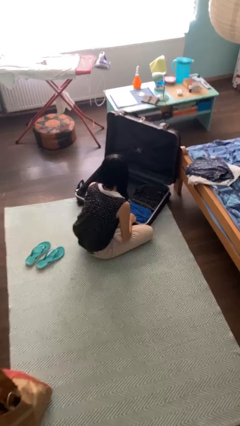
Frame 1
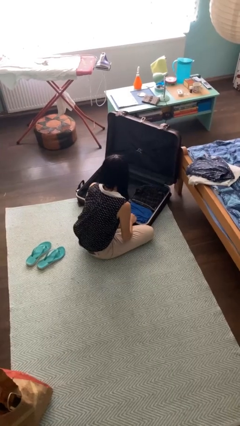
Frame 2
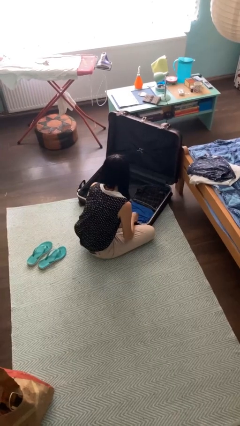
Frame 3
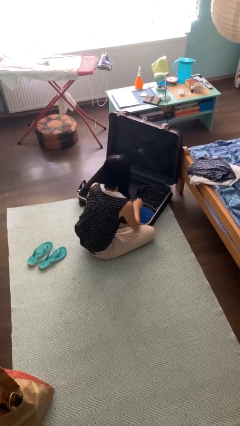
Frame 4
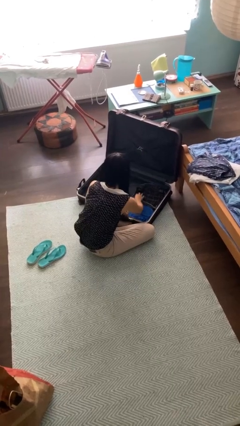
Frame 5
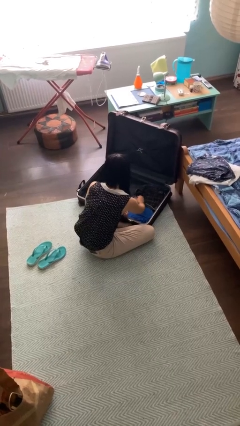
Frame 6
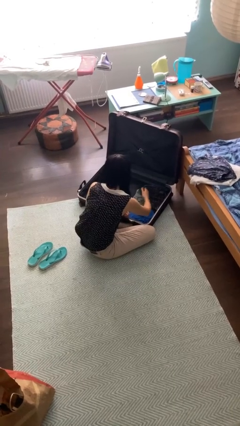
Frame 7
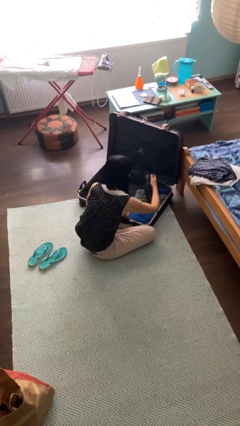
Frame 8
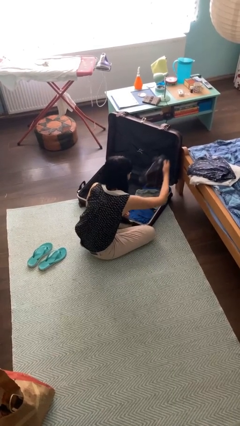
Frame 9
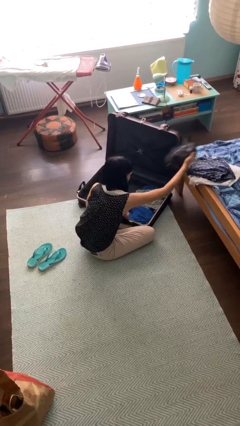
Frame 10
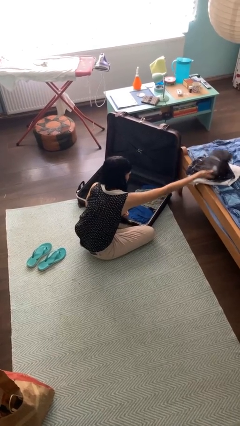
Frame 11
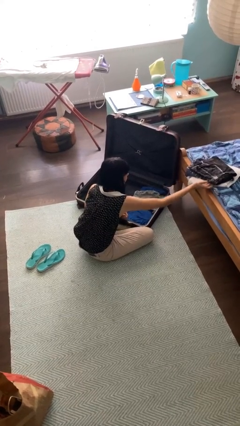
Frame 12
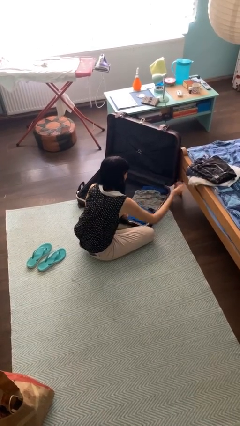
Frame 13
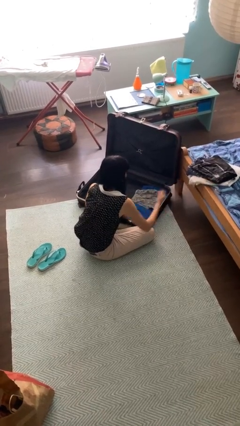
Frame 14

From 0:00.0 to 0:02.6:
person unloads clothes from suitcase

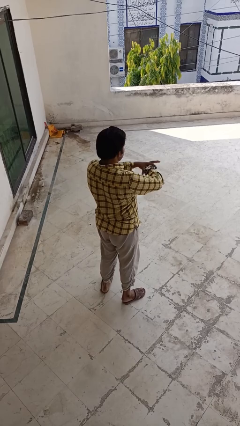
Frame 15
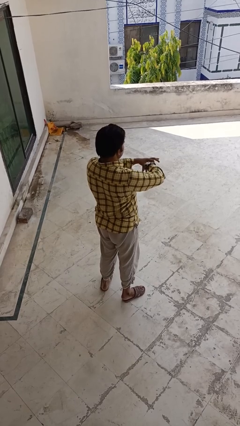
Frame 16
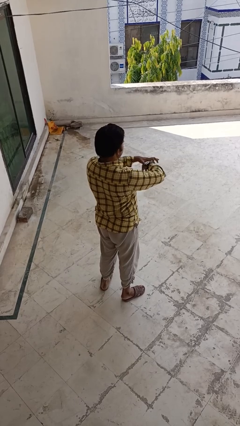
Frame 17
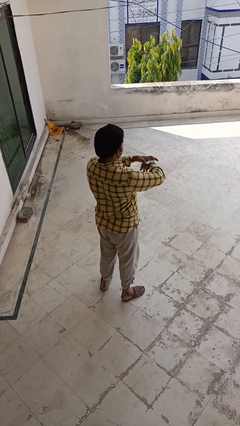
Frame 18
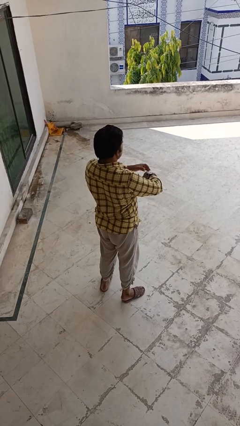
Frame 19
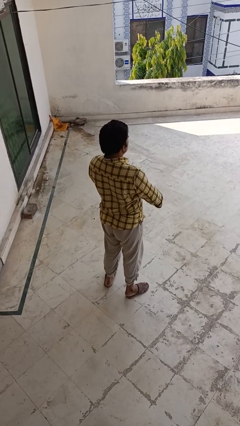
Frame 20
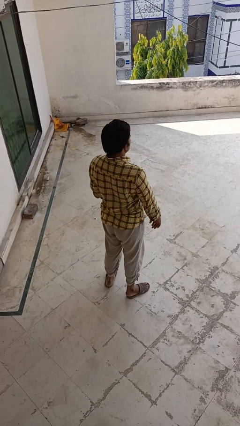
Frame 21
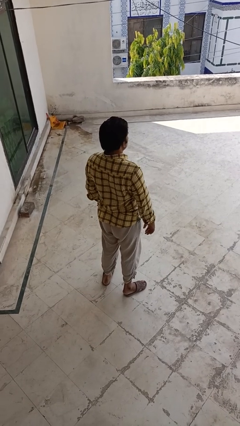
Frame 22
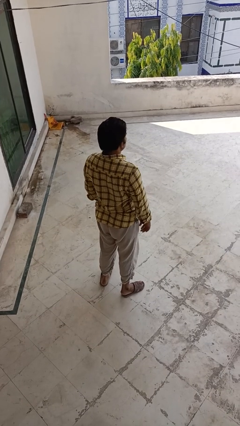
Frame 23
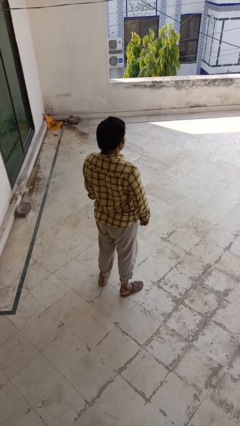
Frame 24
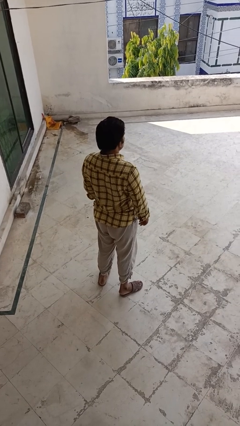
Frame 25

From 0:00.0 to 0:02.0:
person puts on wristwatch

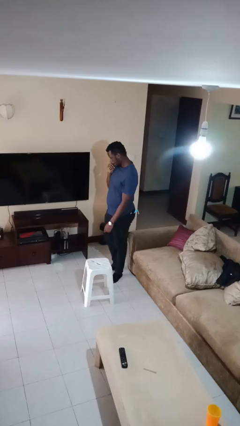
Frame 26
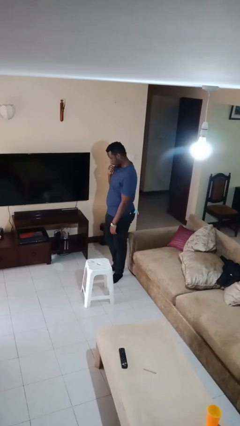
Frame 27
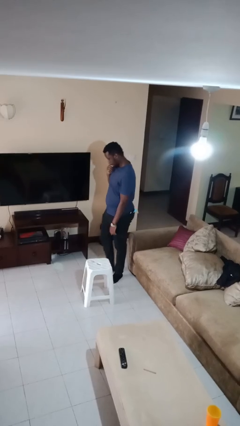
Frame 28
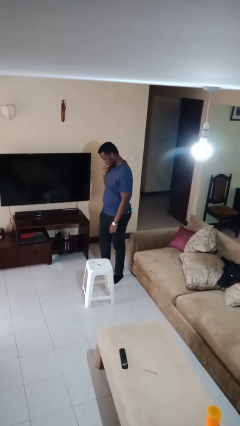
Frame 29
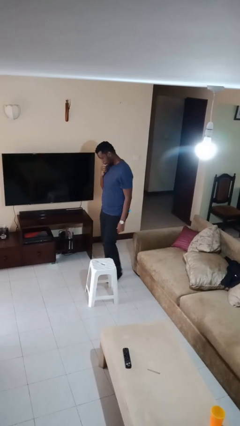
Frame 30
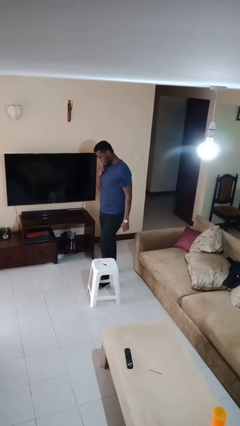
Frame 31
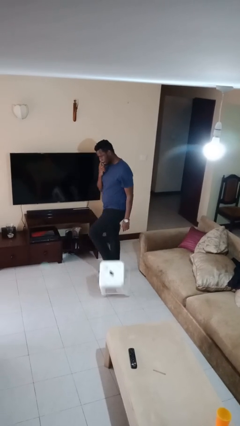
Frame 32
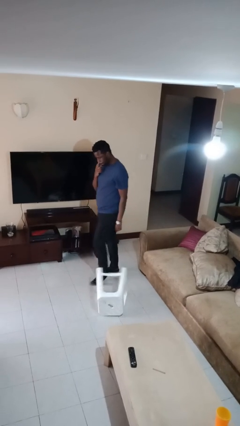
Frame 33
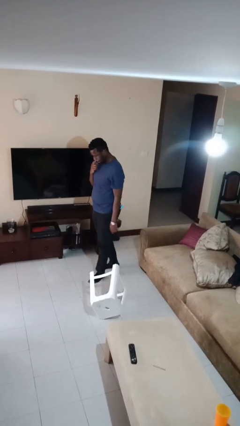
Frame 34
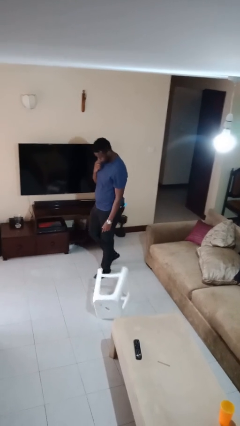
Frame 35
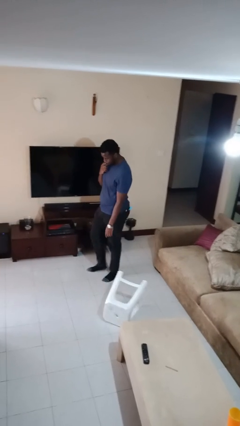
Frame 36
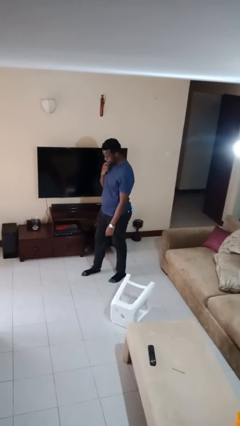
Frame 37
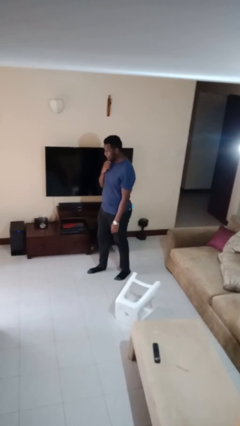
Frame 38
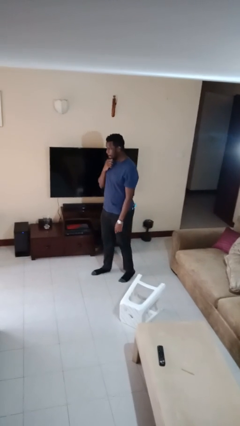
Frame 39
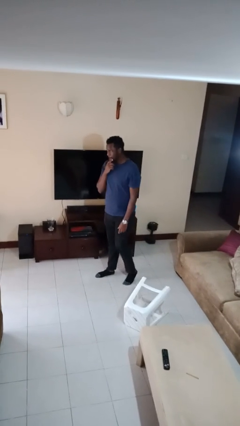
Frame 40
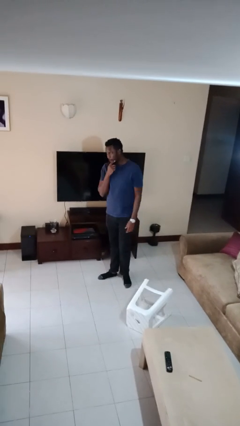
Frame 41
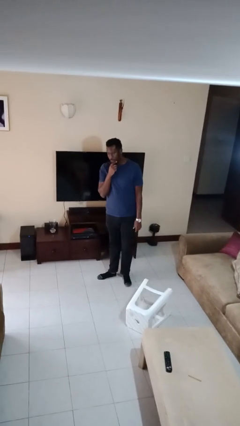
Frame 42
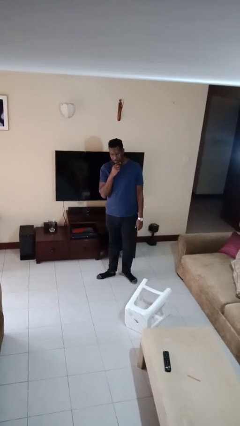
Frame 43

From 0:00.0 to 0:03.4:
person knocks over furniture

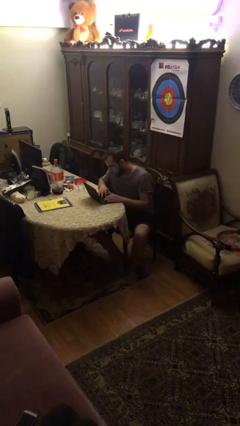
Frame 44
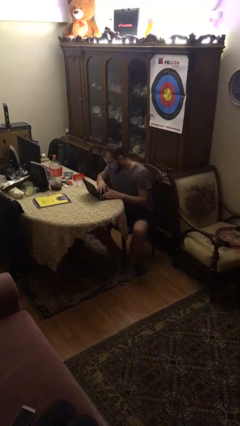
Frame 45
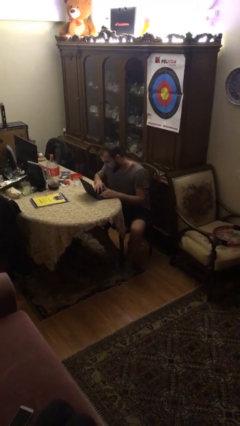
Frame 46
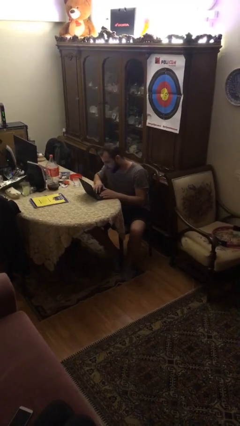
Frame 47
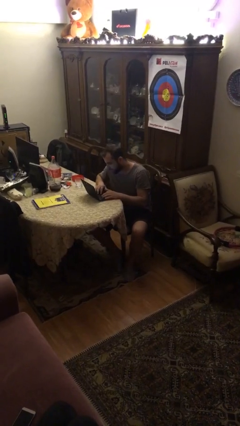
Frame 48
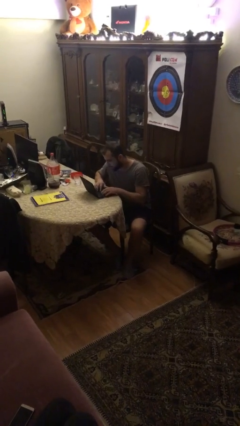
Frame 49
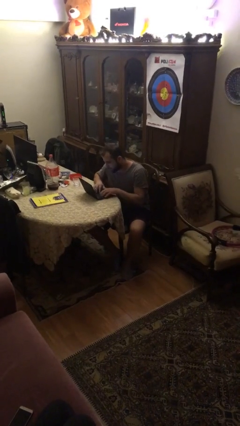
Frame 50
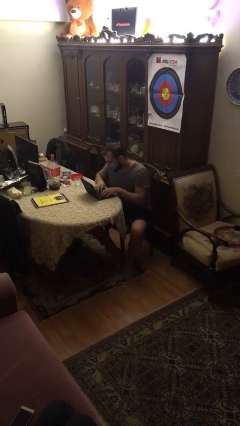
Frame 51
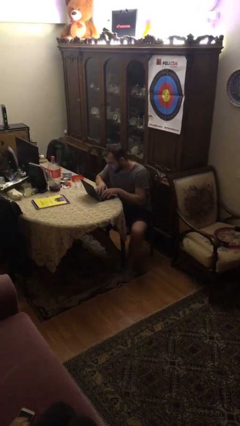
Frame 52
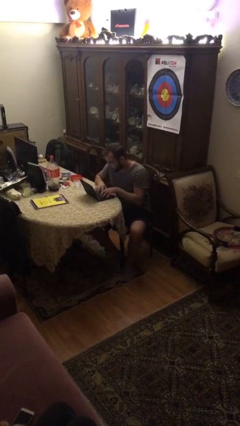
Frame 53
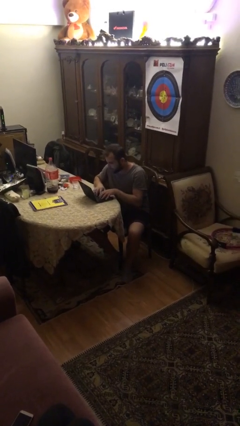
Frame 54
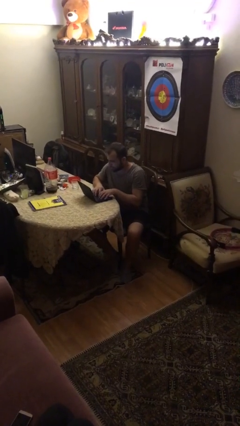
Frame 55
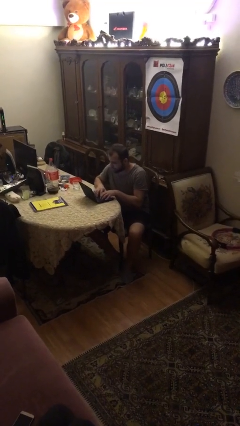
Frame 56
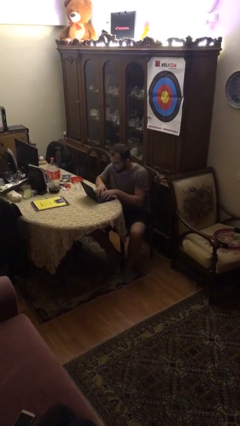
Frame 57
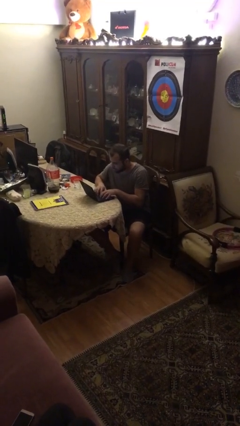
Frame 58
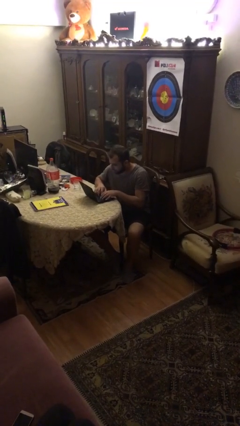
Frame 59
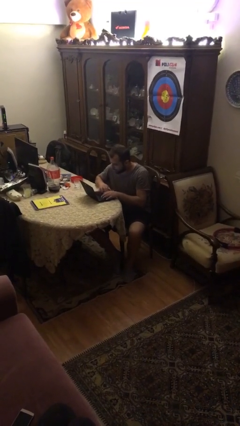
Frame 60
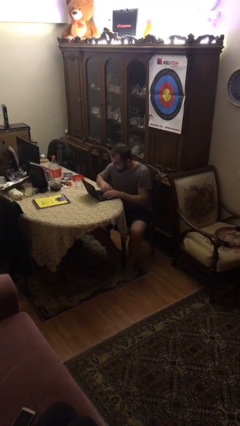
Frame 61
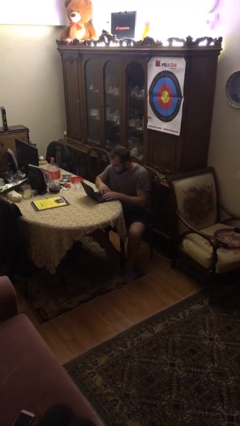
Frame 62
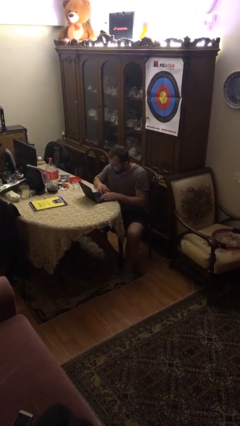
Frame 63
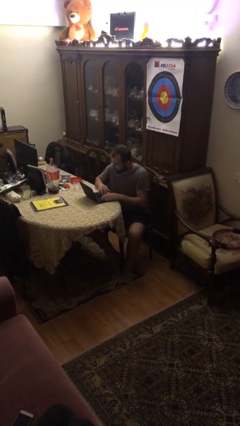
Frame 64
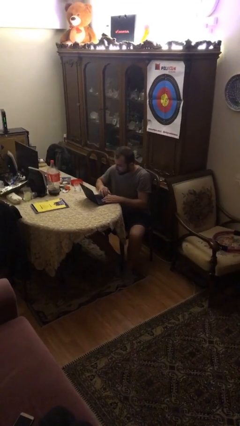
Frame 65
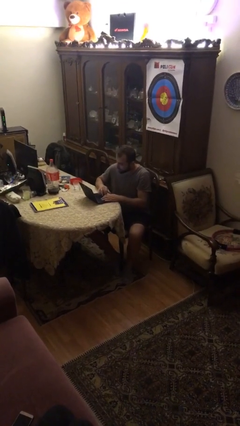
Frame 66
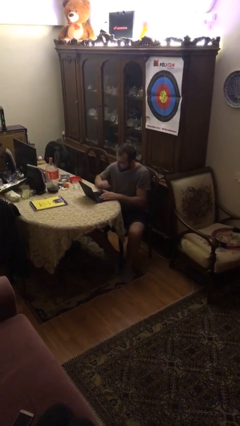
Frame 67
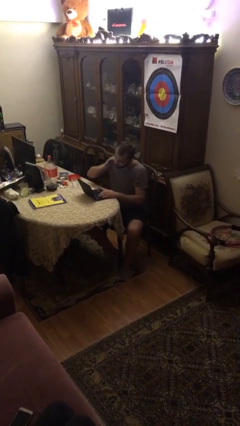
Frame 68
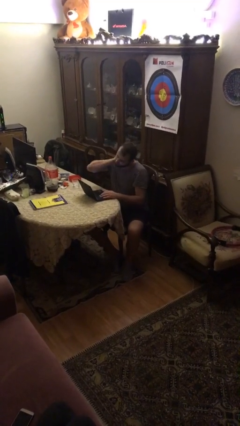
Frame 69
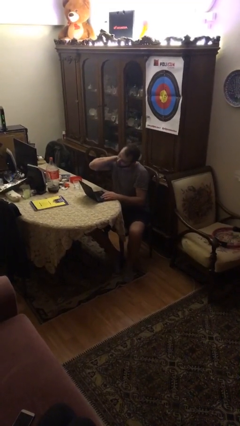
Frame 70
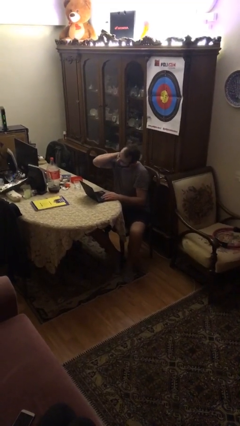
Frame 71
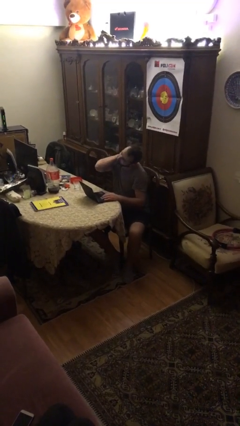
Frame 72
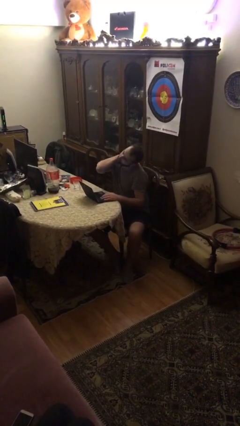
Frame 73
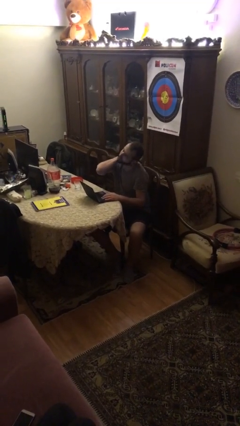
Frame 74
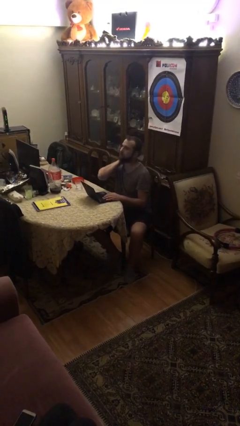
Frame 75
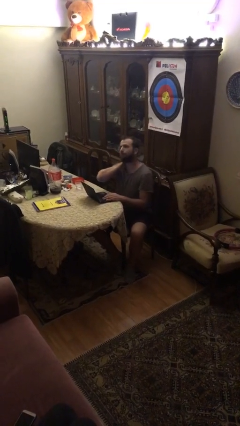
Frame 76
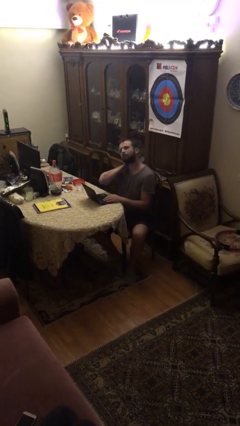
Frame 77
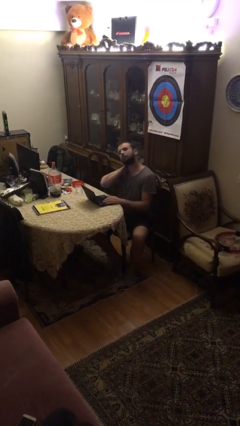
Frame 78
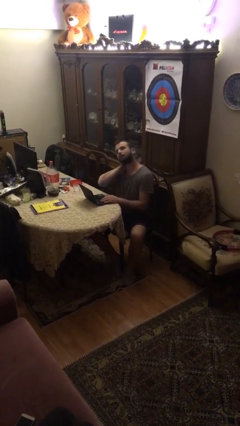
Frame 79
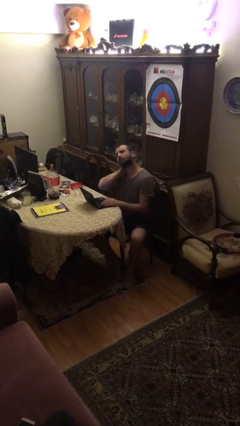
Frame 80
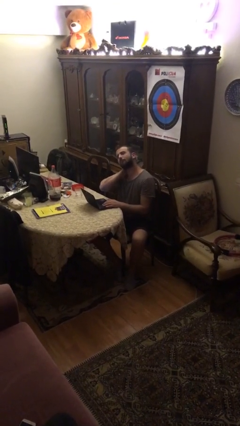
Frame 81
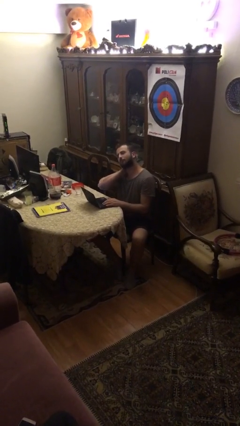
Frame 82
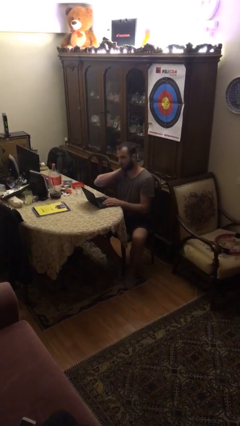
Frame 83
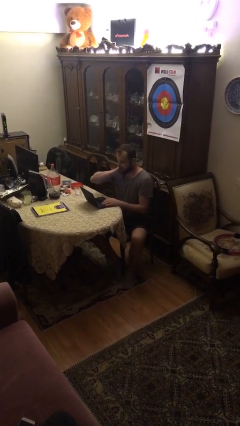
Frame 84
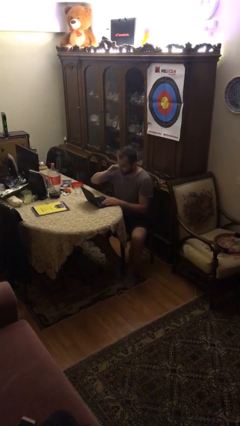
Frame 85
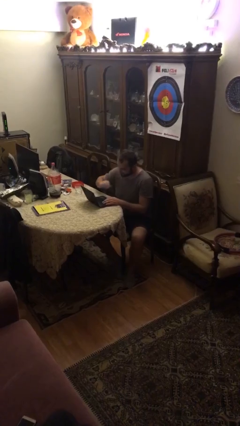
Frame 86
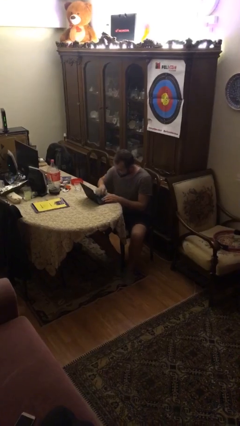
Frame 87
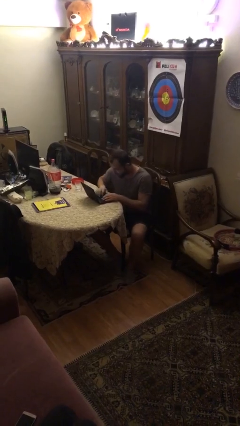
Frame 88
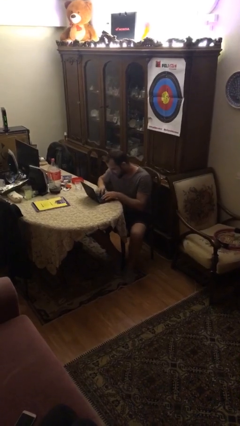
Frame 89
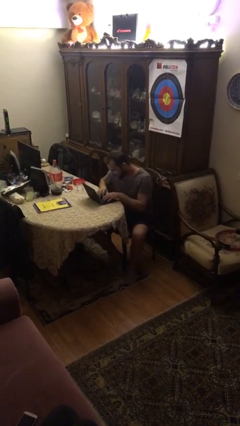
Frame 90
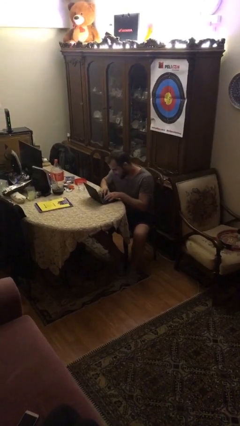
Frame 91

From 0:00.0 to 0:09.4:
person interacts with laptop

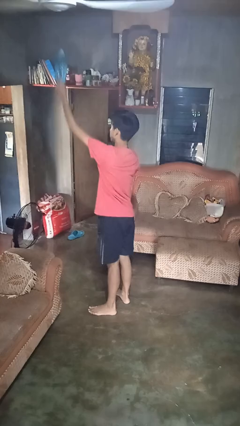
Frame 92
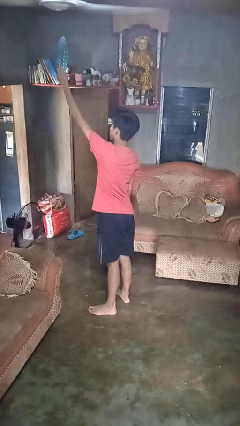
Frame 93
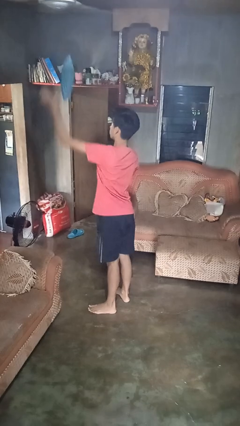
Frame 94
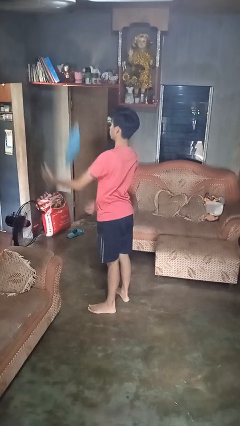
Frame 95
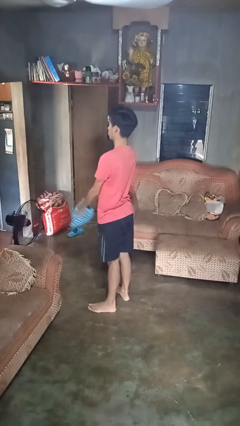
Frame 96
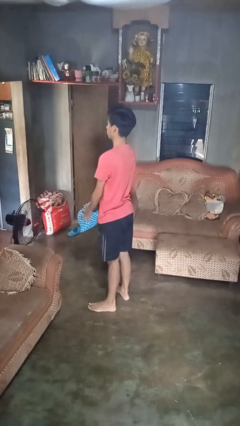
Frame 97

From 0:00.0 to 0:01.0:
person drops object
